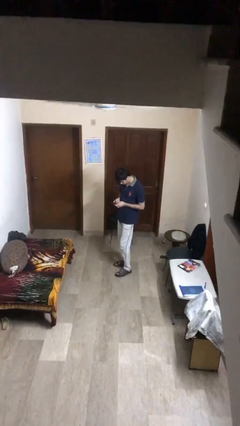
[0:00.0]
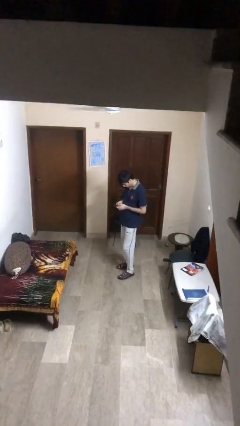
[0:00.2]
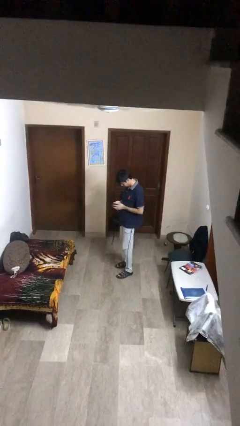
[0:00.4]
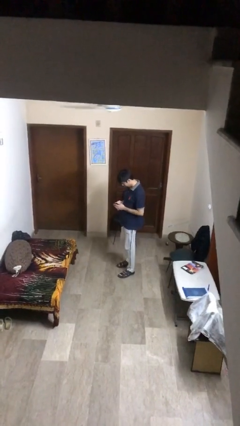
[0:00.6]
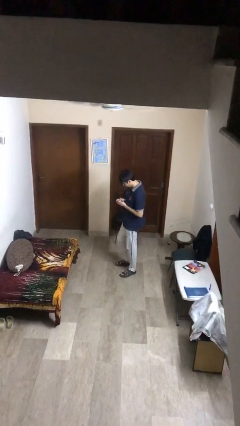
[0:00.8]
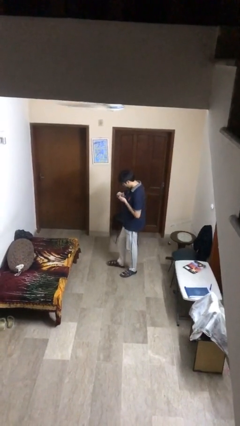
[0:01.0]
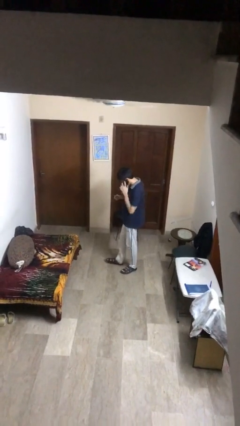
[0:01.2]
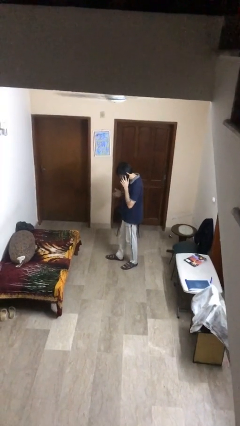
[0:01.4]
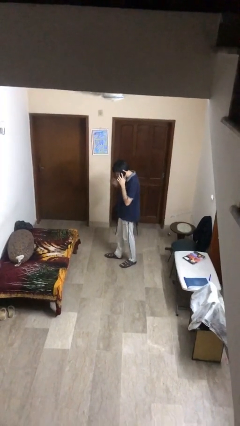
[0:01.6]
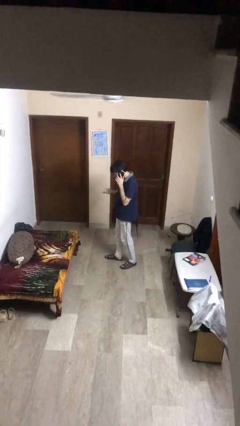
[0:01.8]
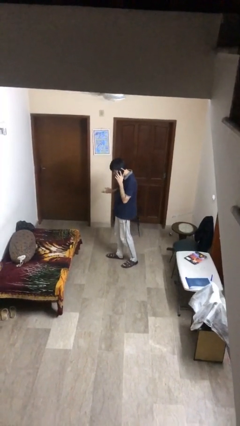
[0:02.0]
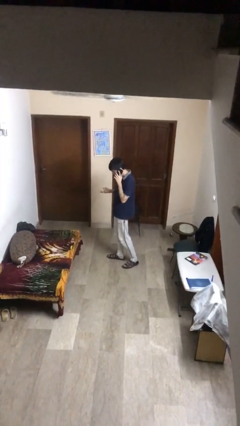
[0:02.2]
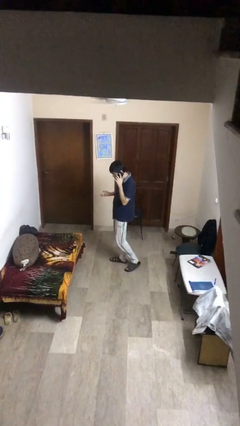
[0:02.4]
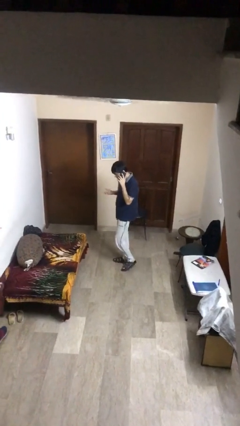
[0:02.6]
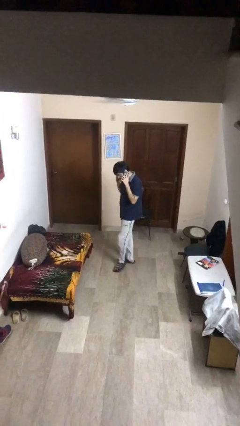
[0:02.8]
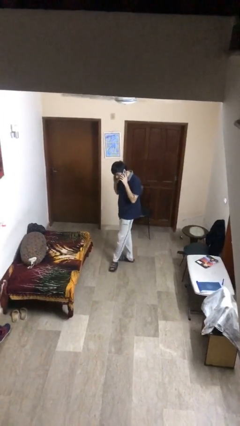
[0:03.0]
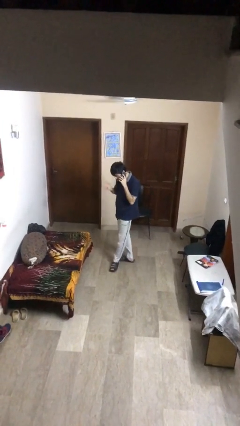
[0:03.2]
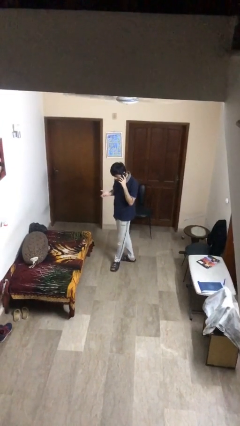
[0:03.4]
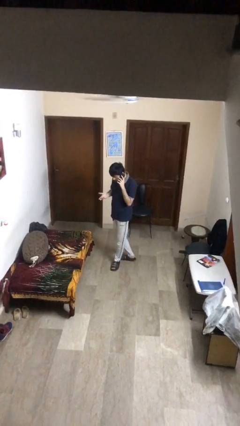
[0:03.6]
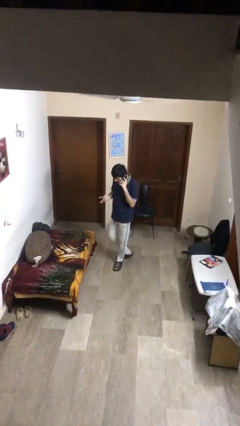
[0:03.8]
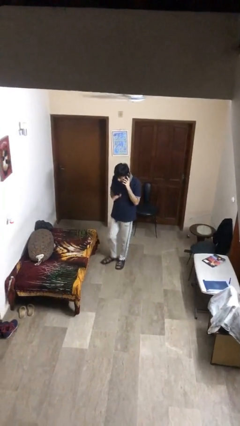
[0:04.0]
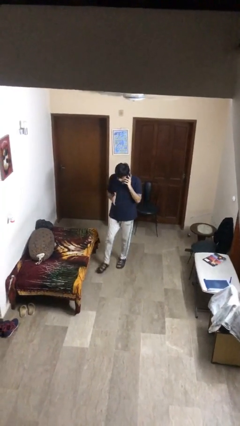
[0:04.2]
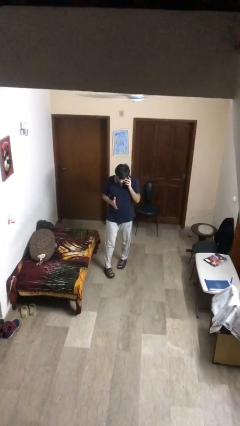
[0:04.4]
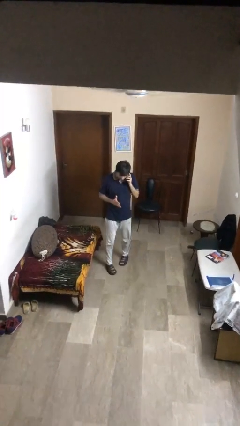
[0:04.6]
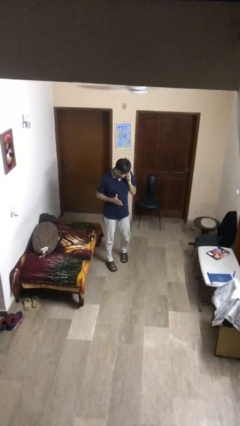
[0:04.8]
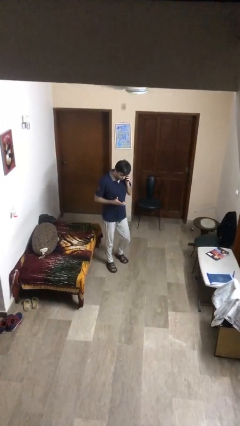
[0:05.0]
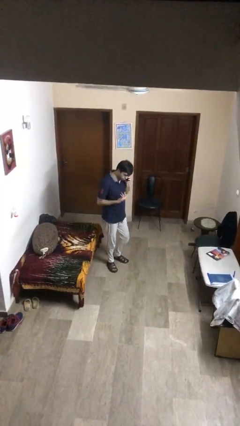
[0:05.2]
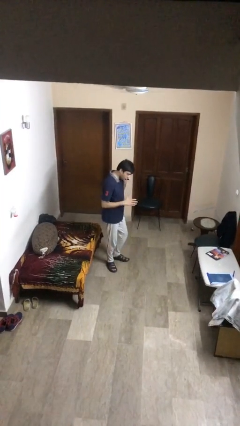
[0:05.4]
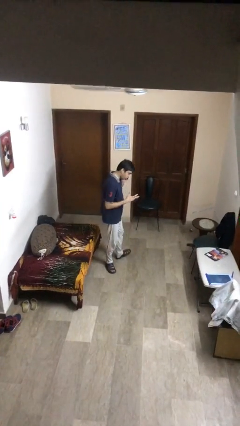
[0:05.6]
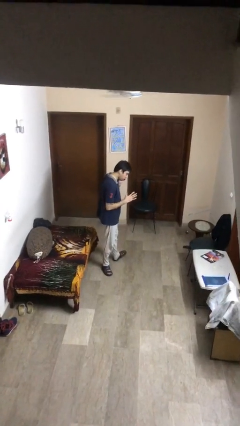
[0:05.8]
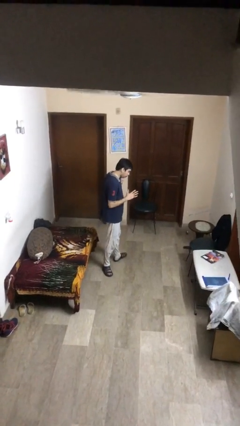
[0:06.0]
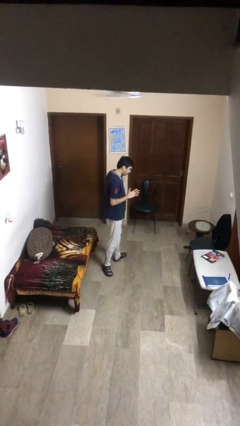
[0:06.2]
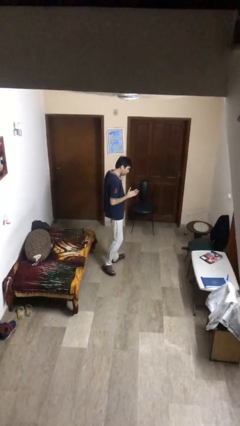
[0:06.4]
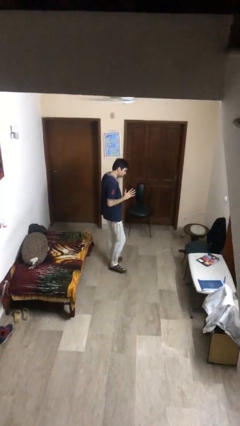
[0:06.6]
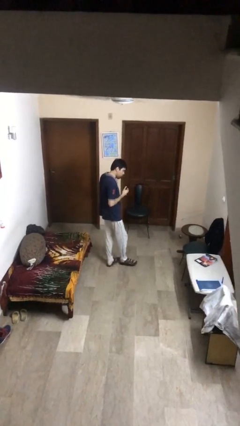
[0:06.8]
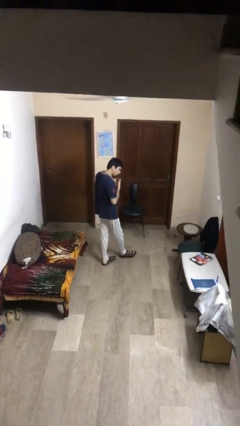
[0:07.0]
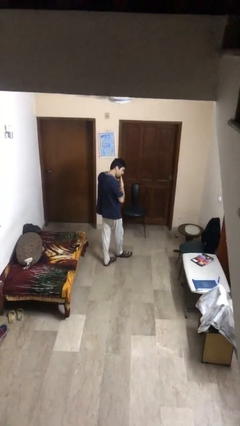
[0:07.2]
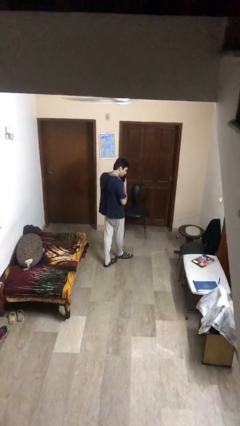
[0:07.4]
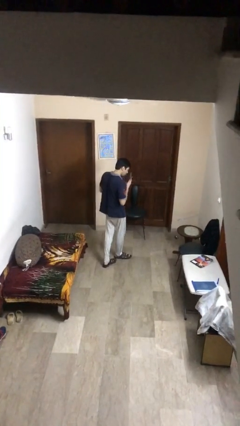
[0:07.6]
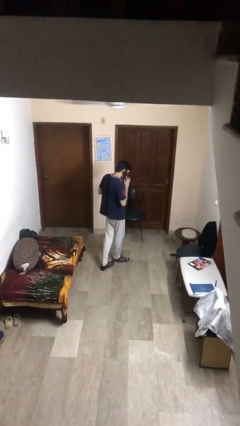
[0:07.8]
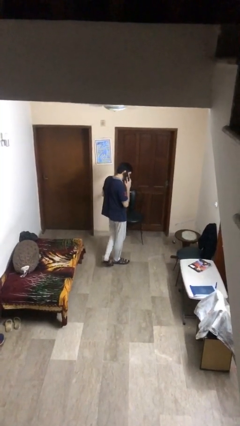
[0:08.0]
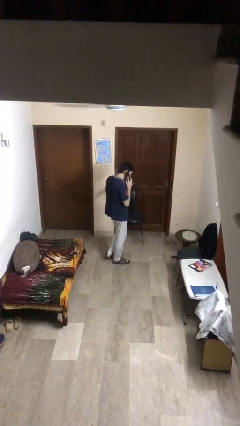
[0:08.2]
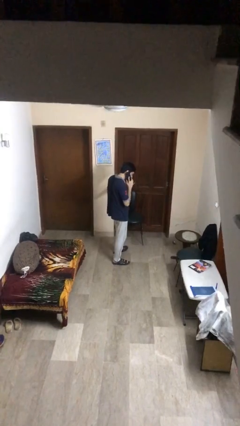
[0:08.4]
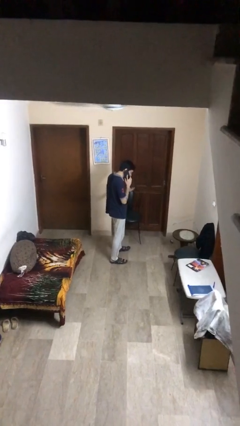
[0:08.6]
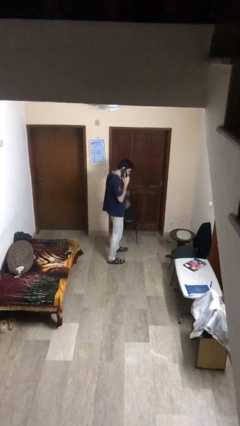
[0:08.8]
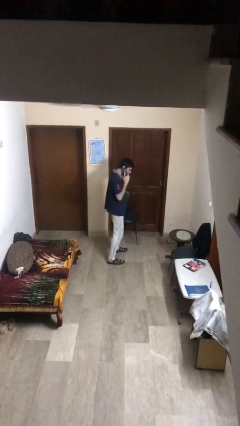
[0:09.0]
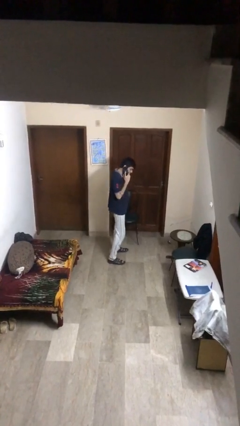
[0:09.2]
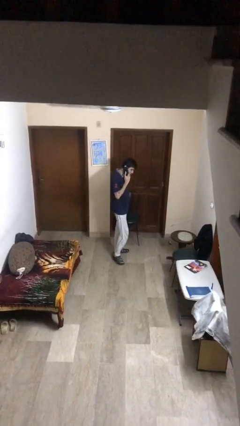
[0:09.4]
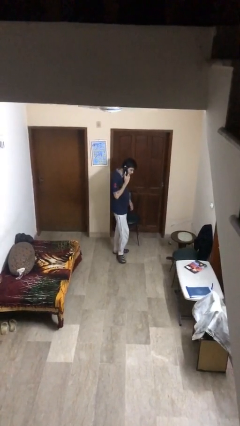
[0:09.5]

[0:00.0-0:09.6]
person talks on phone

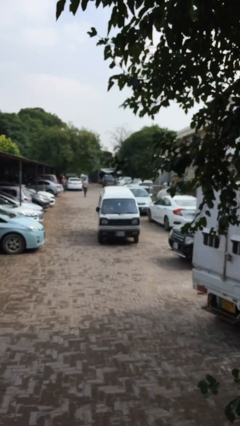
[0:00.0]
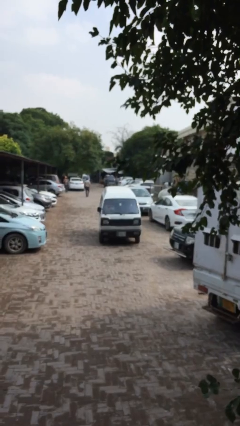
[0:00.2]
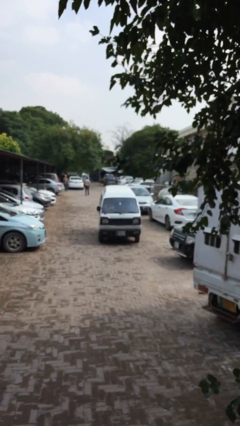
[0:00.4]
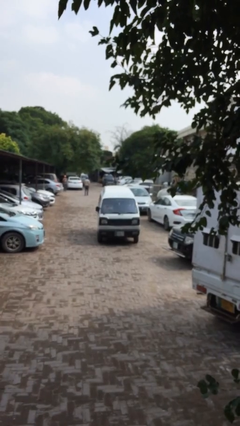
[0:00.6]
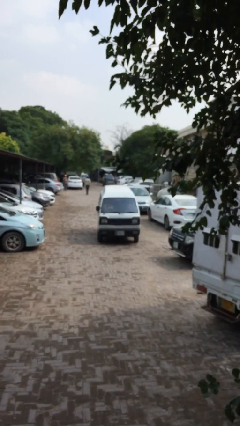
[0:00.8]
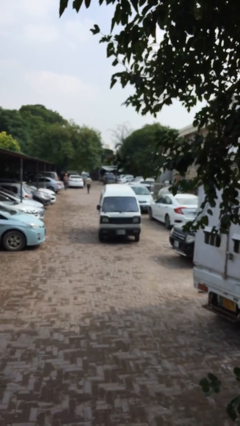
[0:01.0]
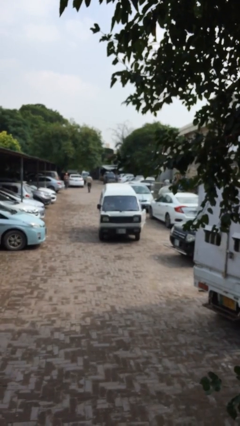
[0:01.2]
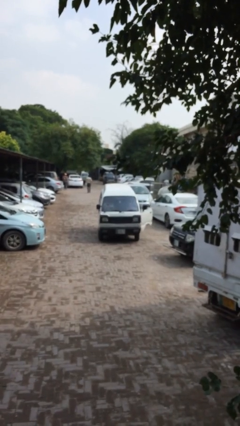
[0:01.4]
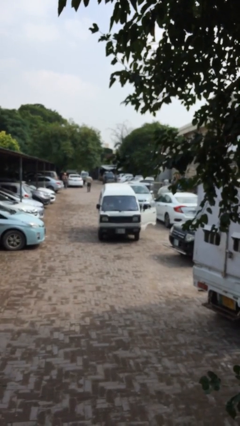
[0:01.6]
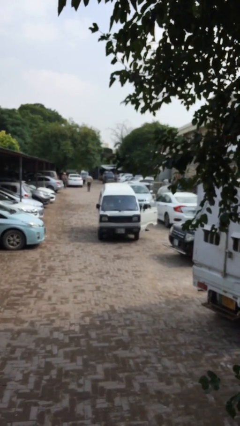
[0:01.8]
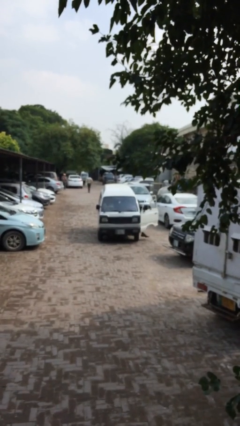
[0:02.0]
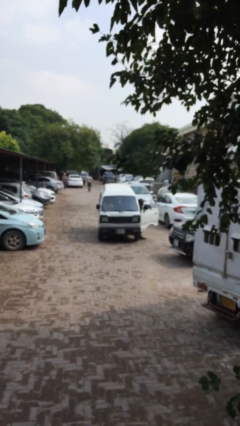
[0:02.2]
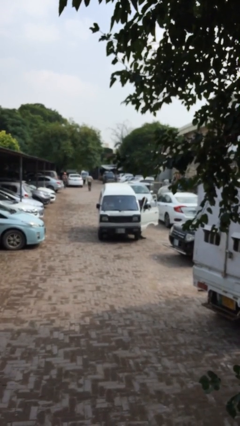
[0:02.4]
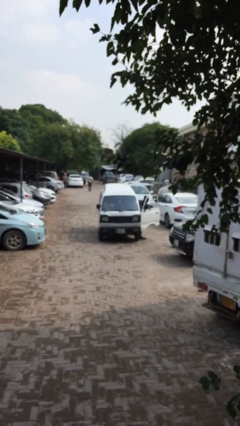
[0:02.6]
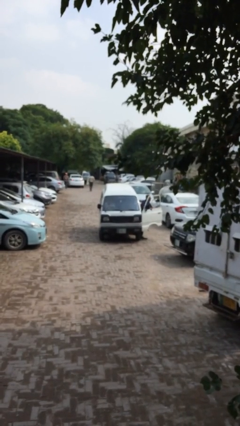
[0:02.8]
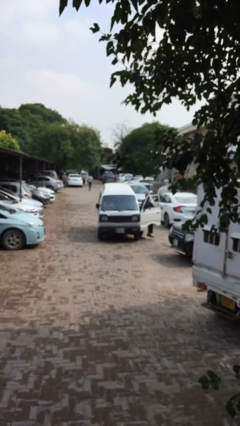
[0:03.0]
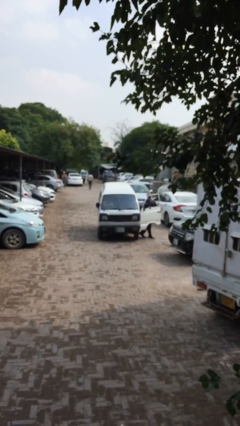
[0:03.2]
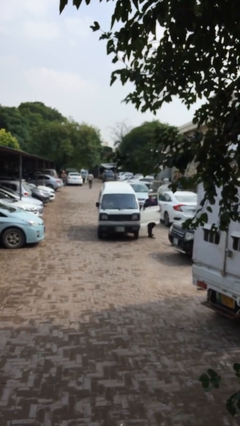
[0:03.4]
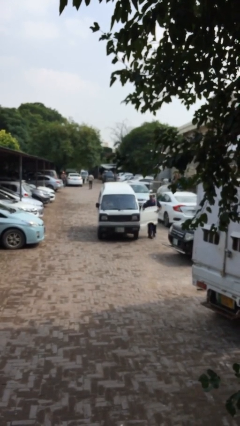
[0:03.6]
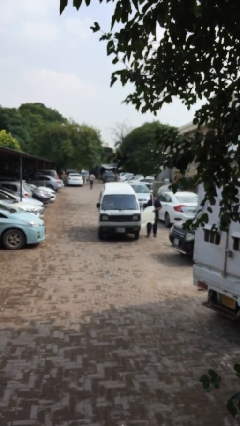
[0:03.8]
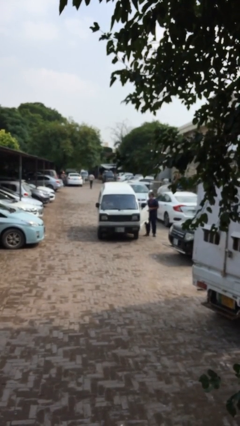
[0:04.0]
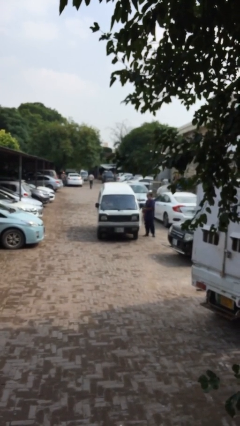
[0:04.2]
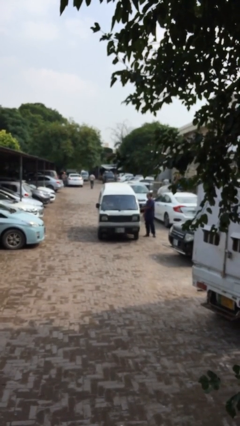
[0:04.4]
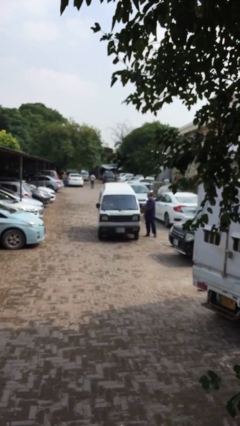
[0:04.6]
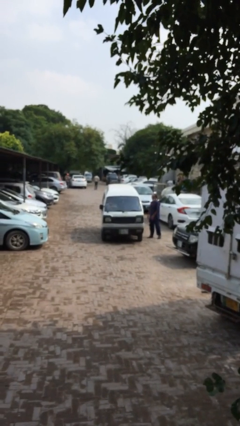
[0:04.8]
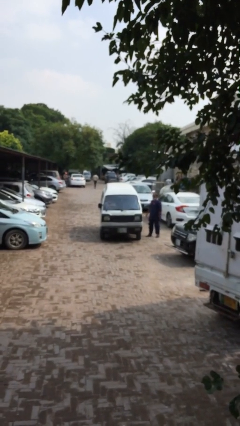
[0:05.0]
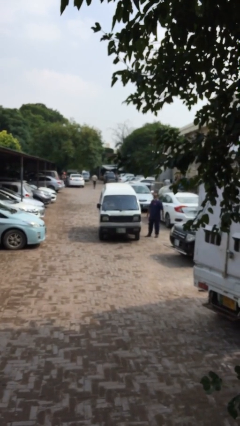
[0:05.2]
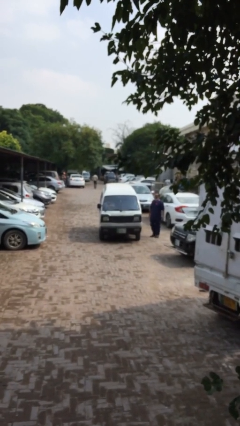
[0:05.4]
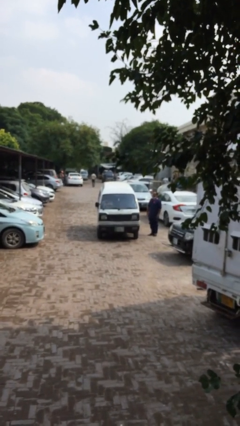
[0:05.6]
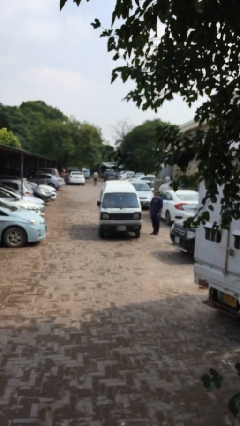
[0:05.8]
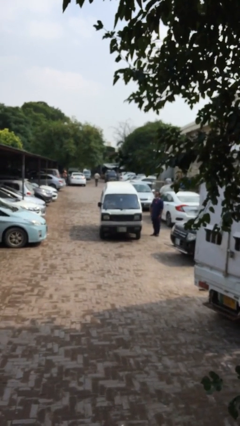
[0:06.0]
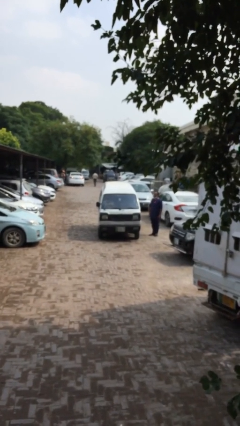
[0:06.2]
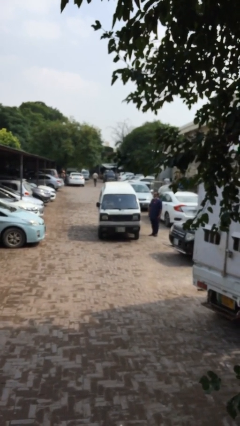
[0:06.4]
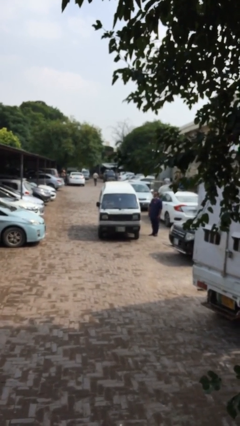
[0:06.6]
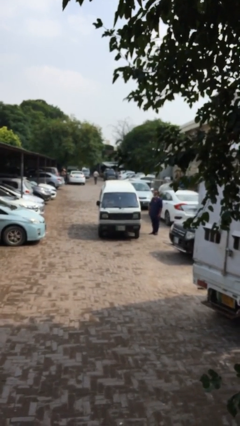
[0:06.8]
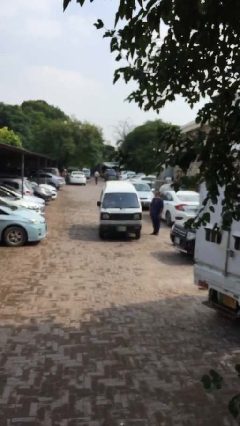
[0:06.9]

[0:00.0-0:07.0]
car drops off person

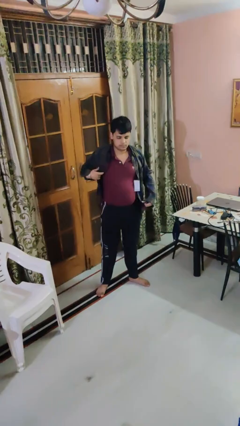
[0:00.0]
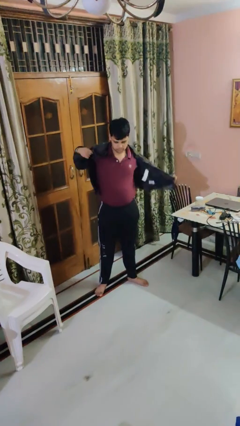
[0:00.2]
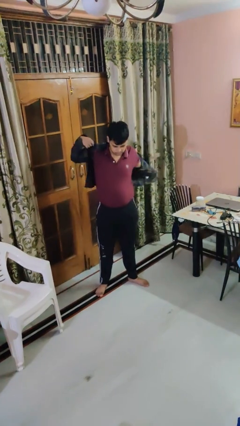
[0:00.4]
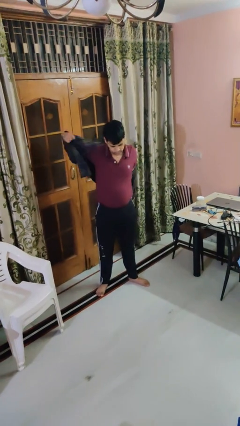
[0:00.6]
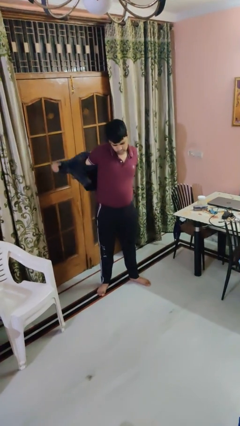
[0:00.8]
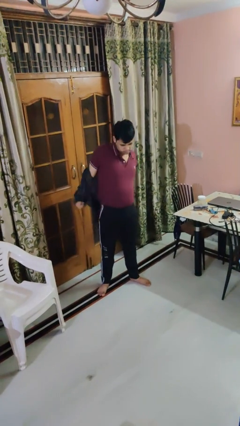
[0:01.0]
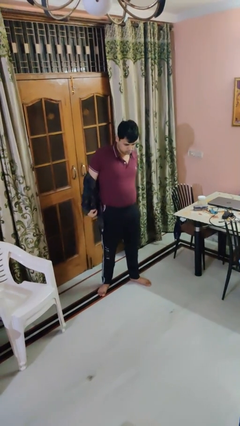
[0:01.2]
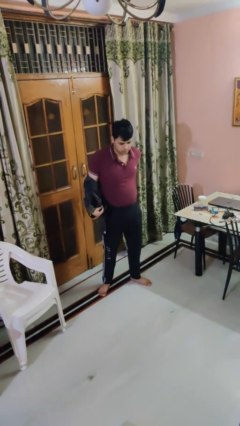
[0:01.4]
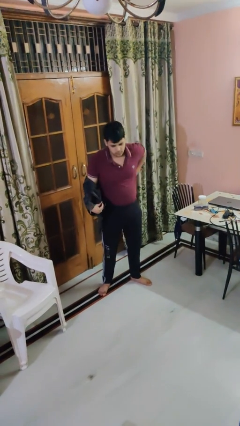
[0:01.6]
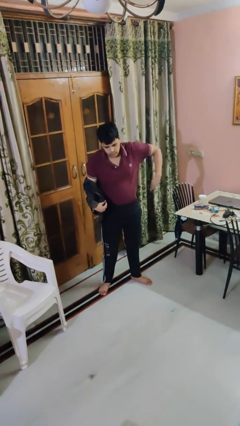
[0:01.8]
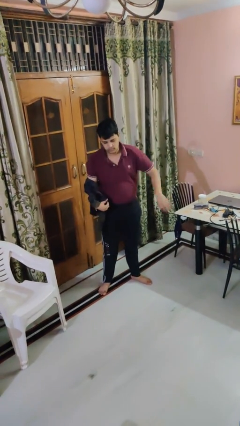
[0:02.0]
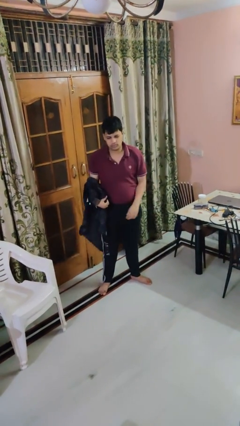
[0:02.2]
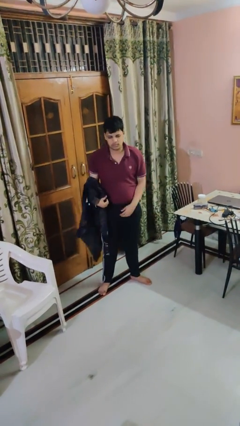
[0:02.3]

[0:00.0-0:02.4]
person takes off shirt
